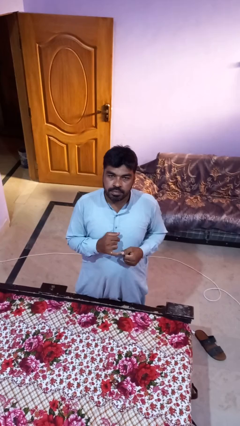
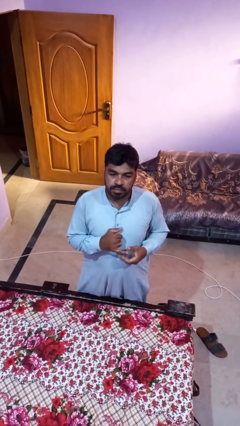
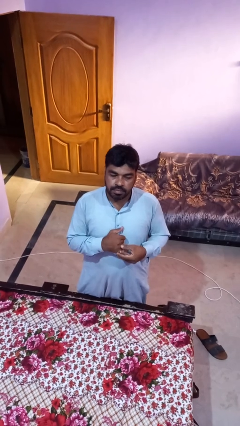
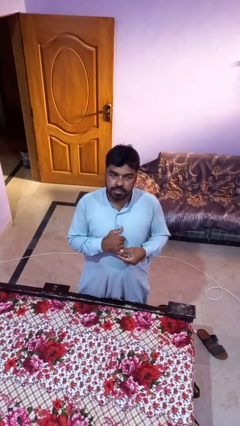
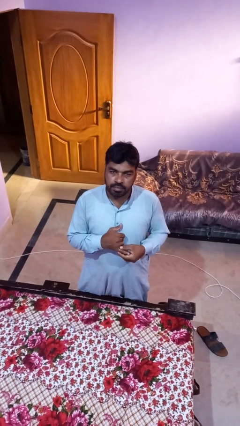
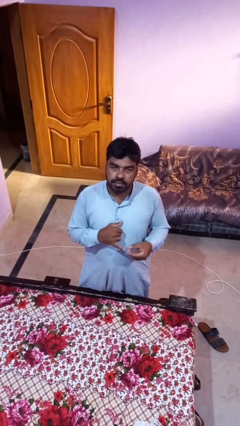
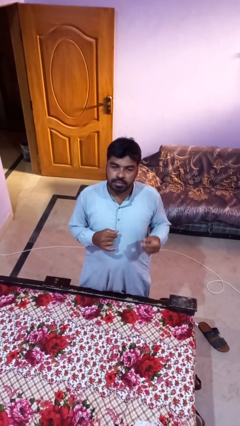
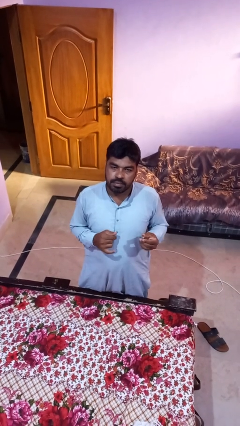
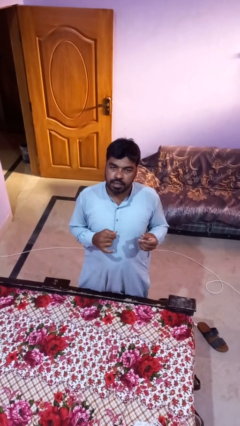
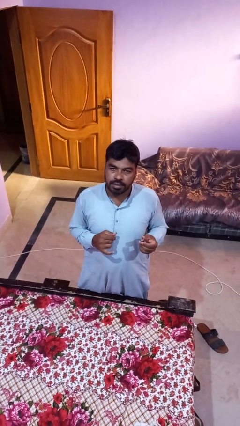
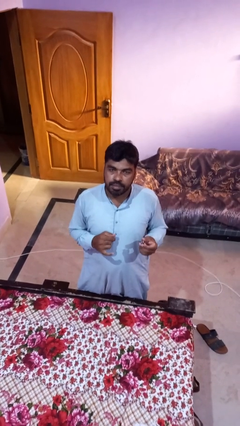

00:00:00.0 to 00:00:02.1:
person takes off ring

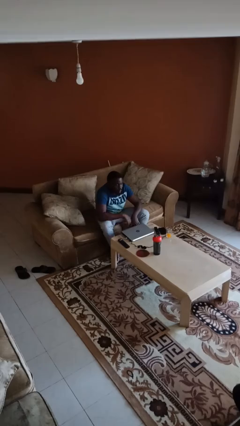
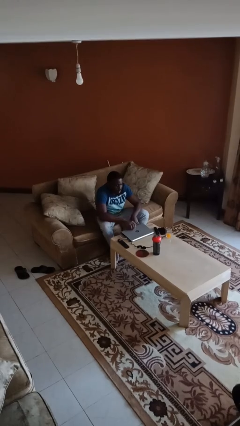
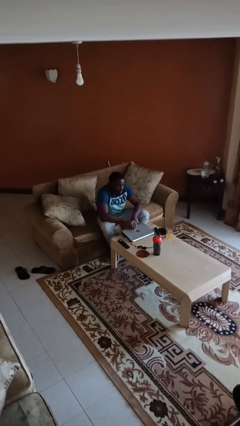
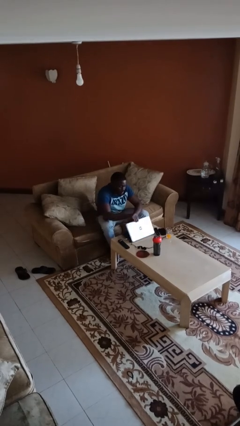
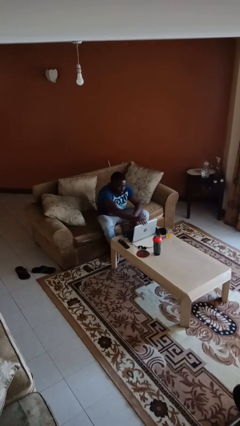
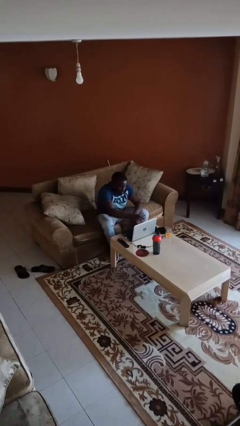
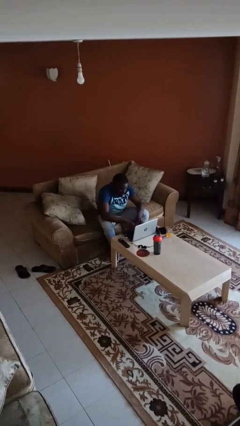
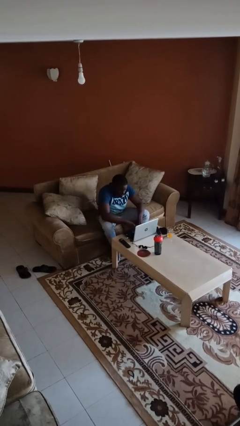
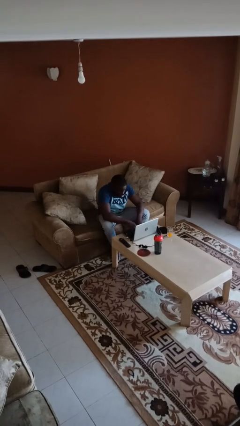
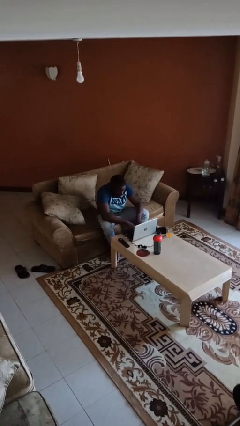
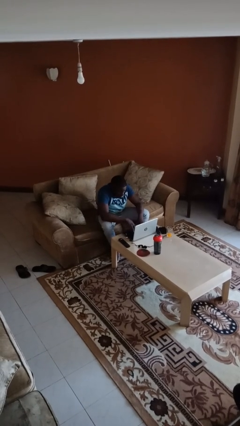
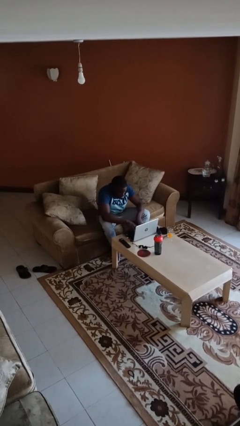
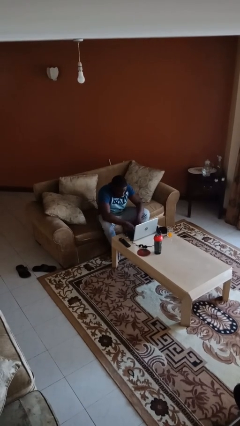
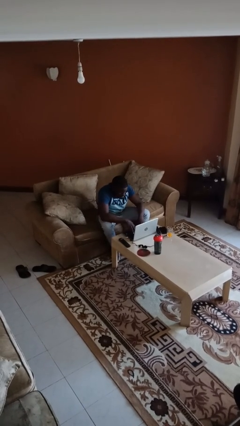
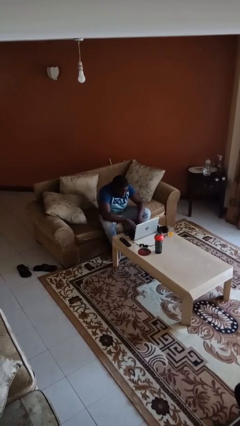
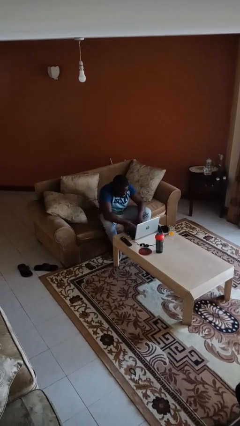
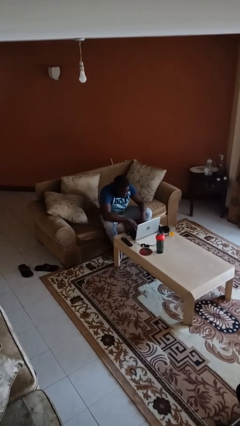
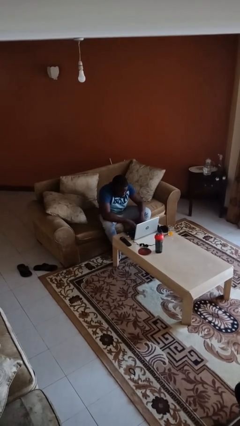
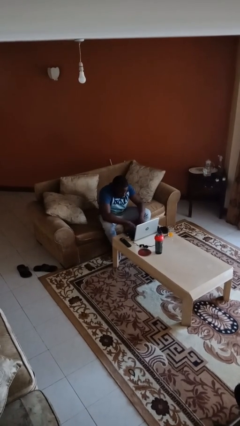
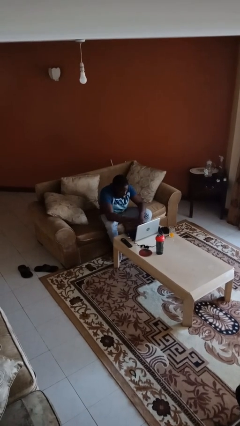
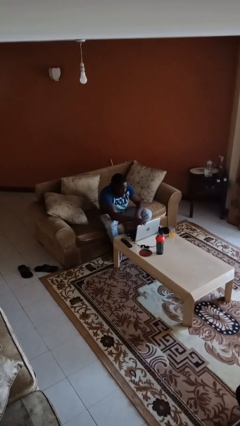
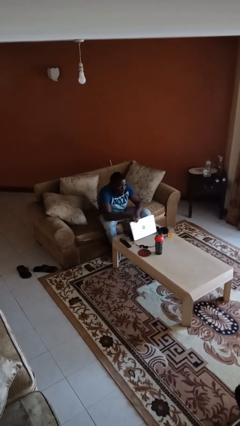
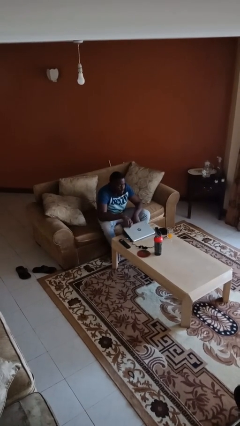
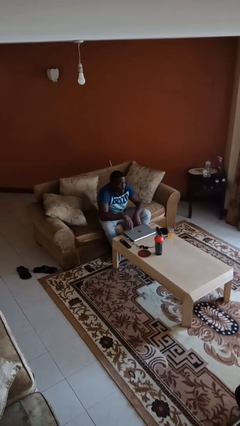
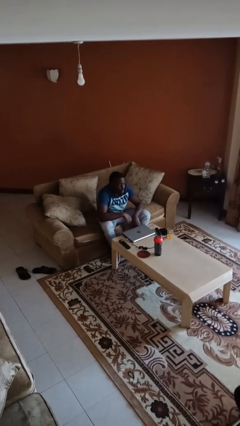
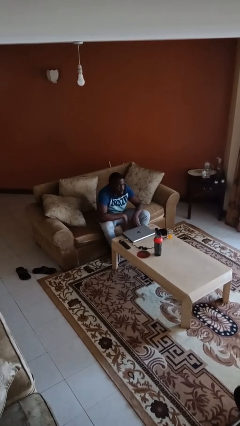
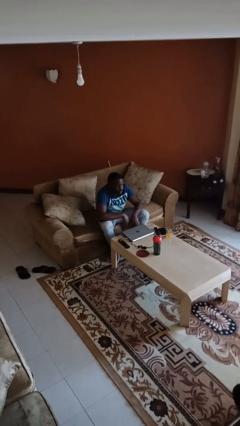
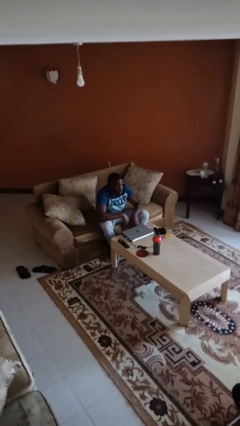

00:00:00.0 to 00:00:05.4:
person interacts with laptop

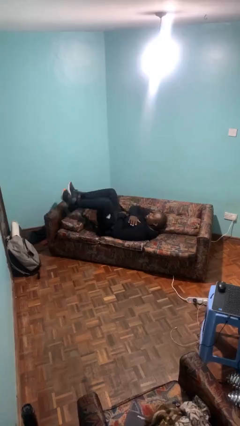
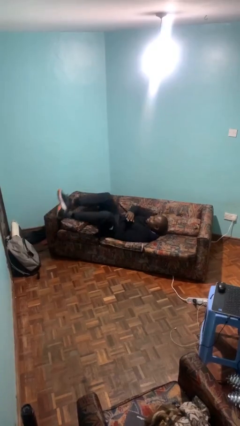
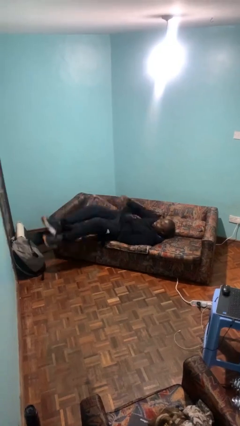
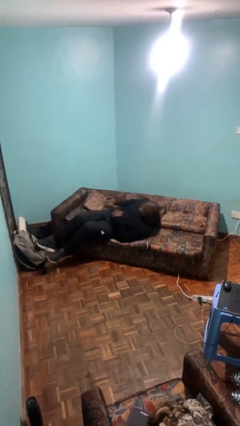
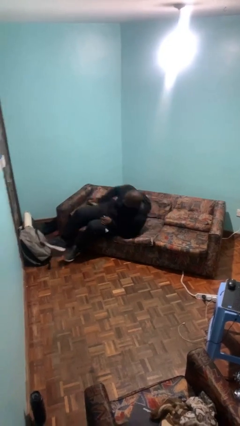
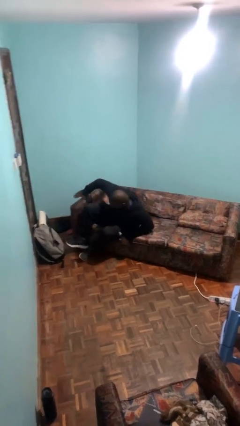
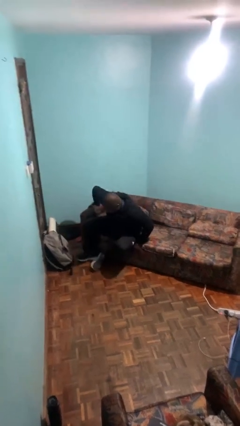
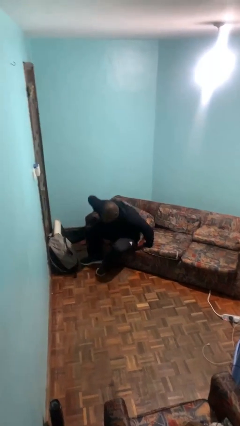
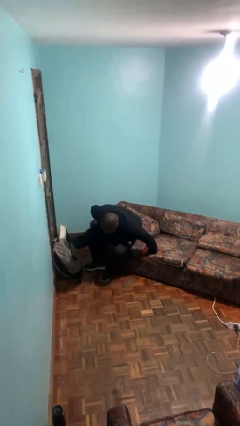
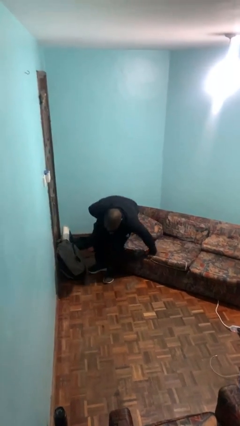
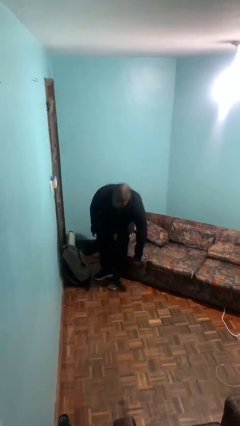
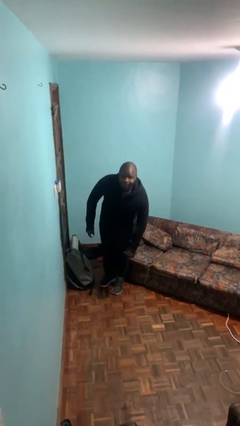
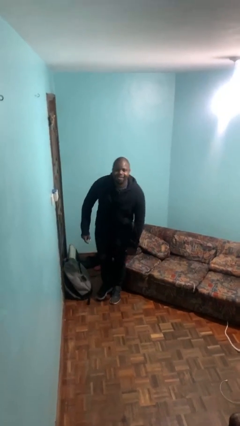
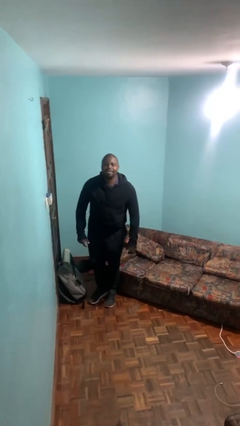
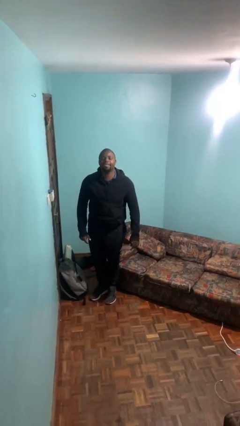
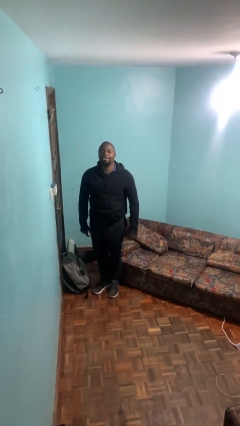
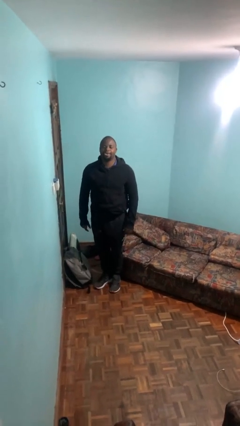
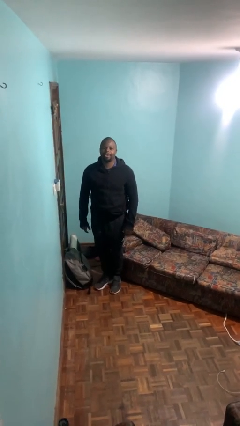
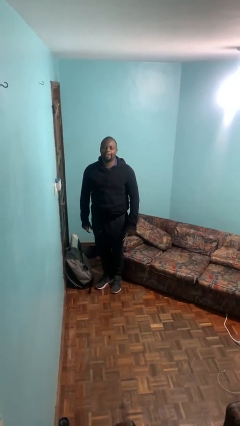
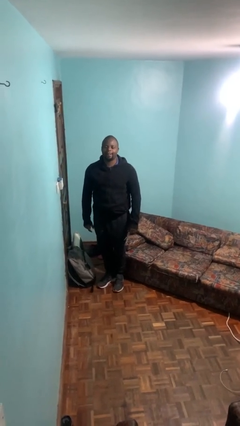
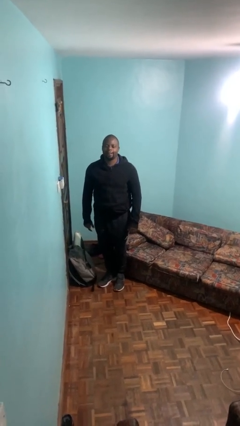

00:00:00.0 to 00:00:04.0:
person stands up

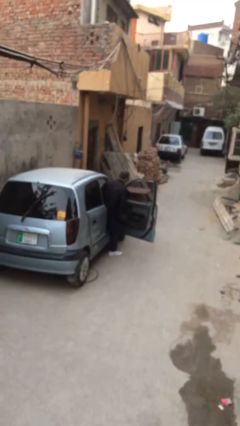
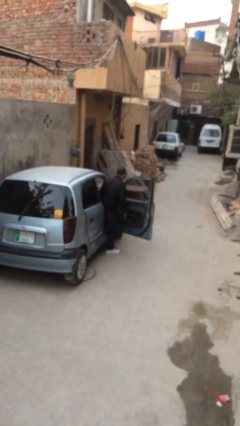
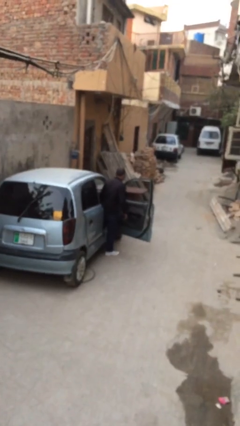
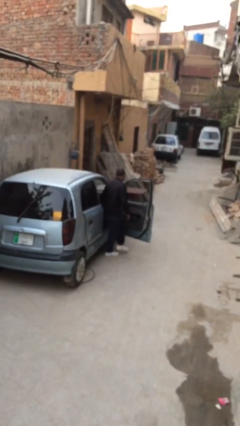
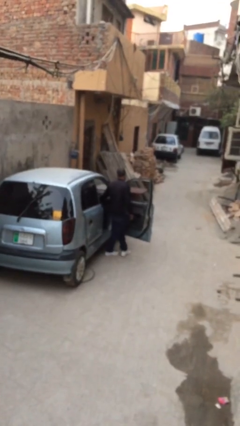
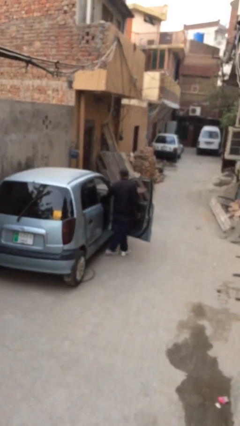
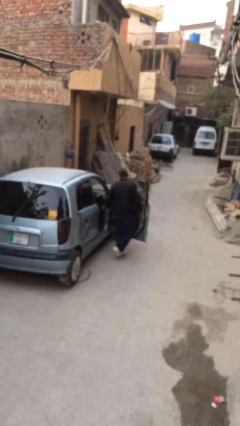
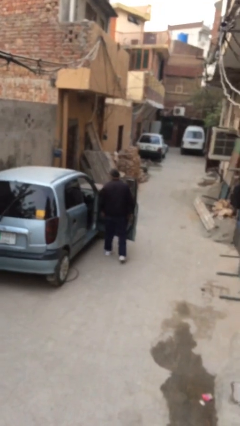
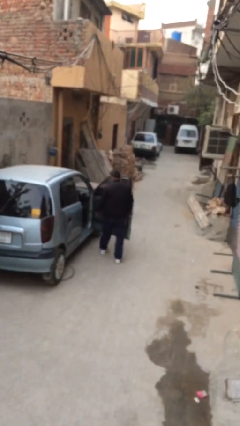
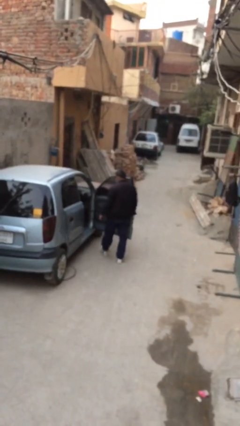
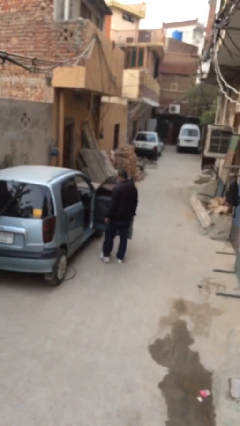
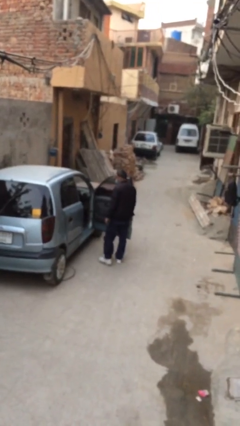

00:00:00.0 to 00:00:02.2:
person exits car

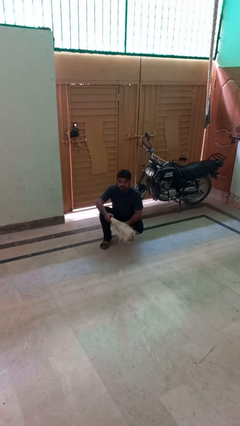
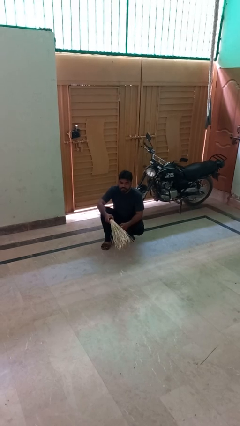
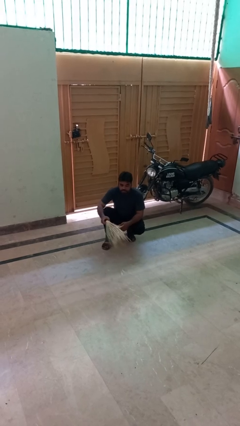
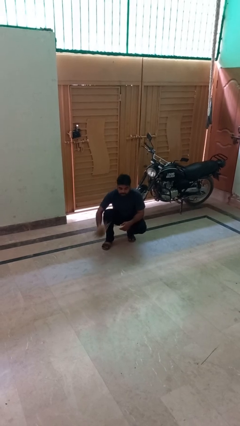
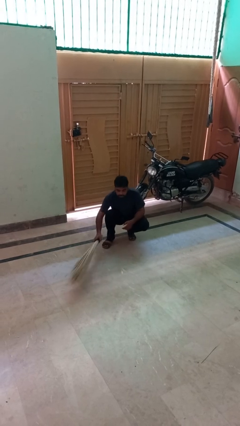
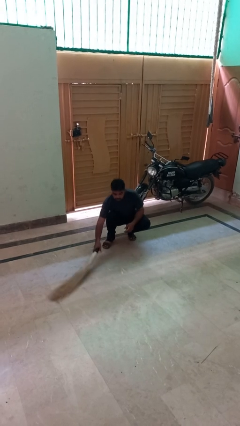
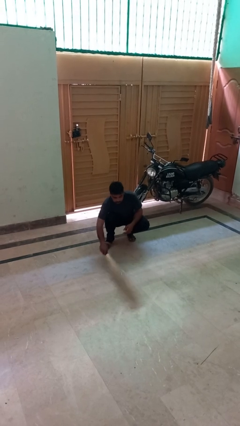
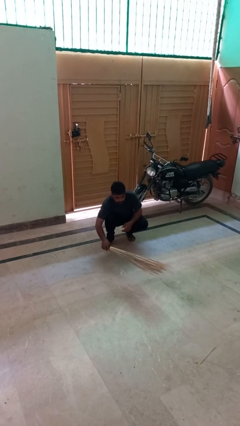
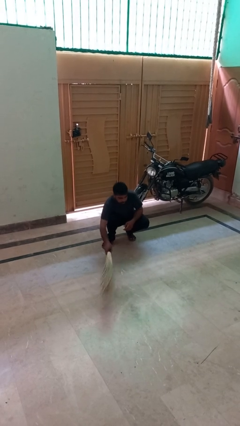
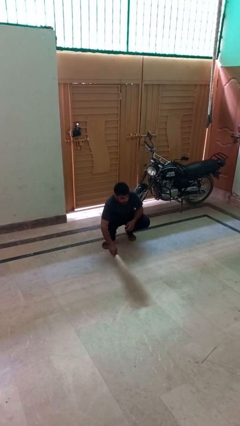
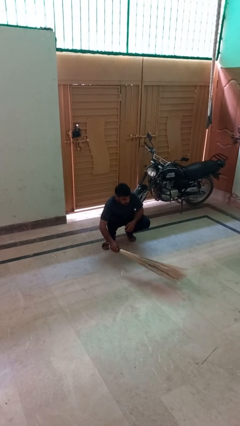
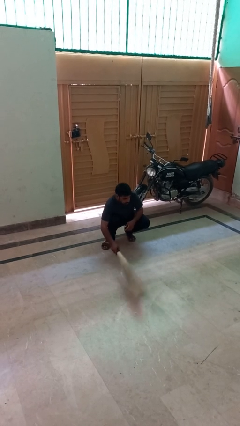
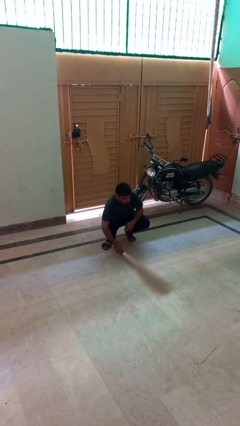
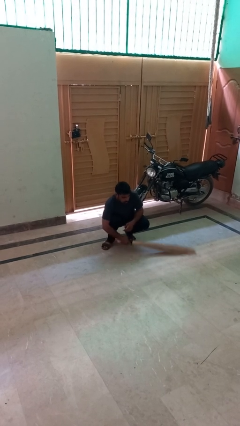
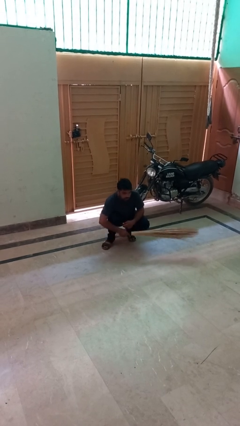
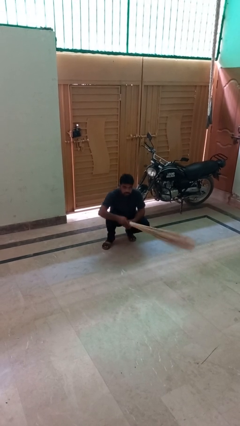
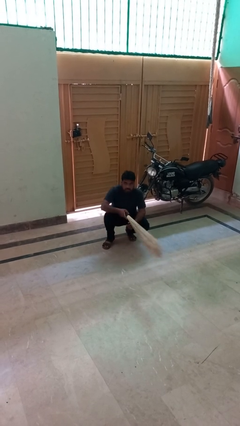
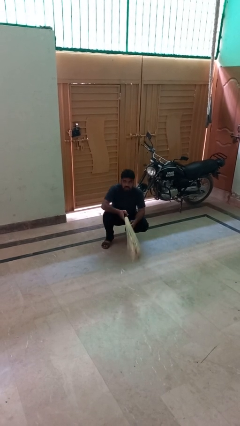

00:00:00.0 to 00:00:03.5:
person sweeps floor

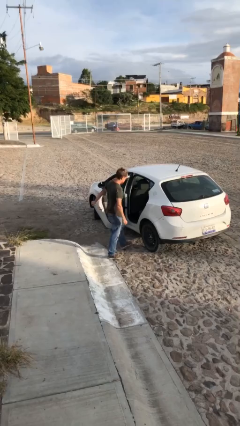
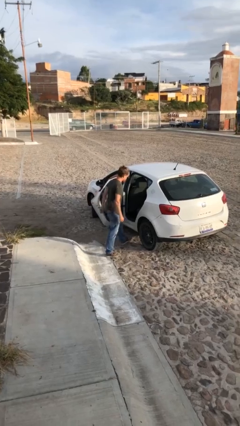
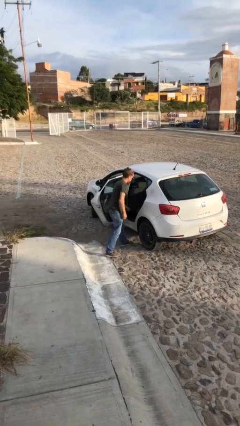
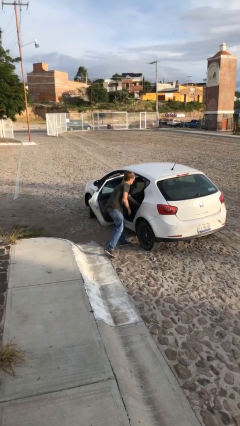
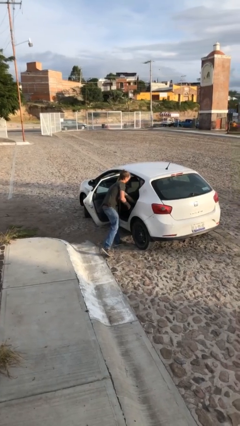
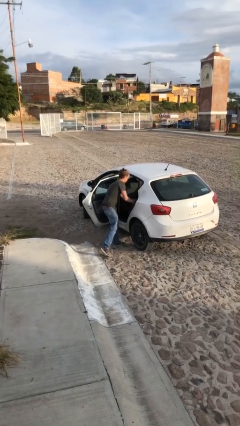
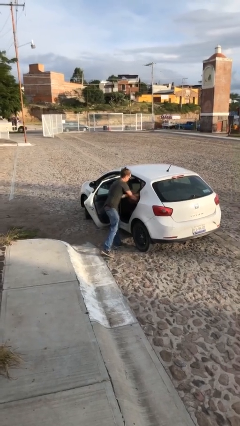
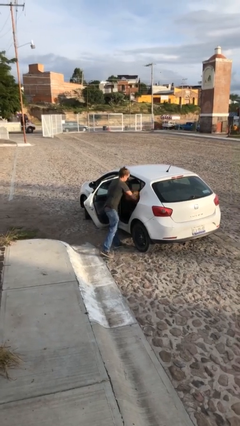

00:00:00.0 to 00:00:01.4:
person unloads car
